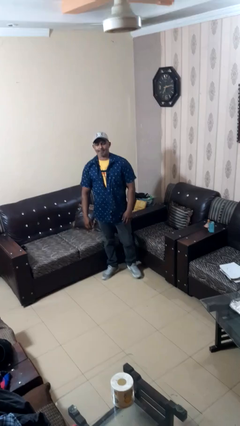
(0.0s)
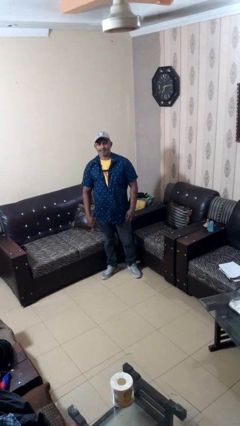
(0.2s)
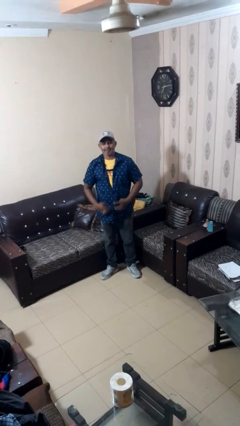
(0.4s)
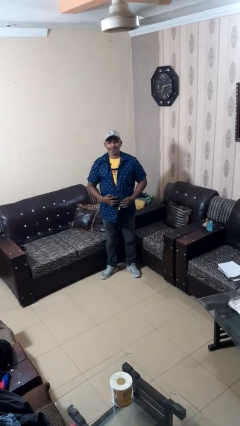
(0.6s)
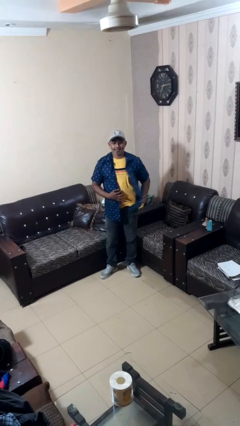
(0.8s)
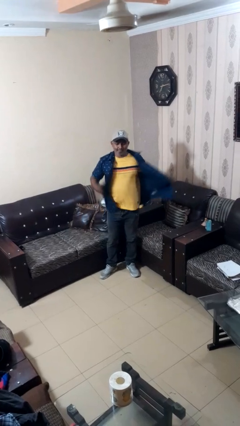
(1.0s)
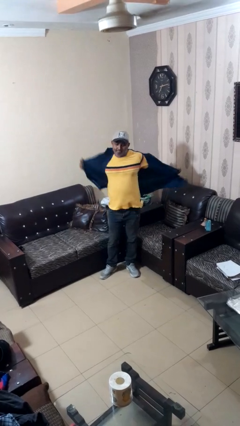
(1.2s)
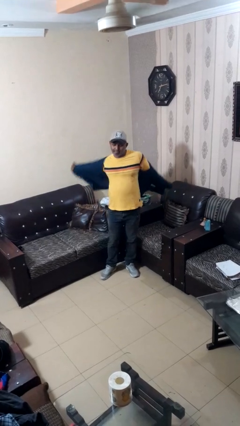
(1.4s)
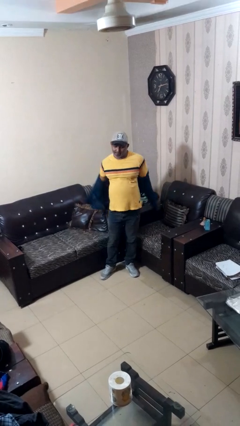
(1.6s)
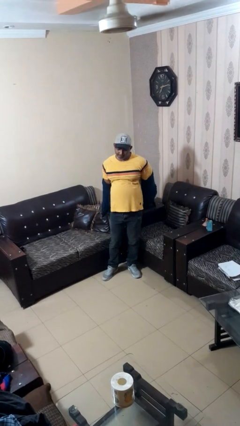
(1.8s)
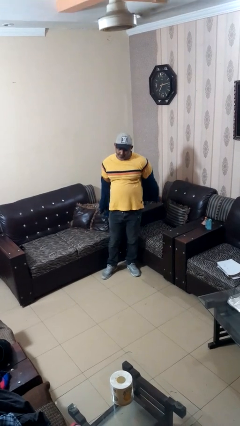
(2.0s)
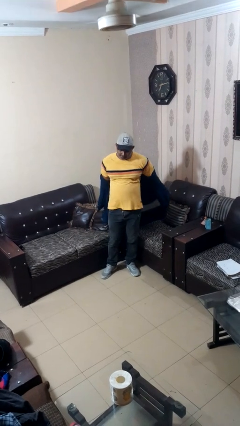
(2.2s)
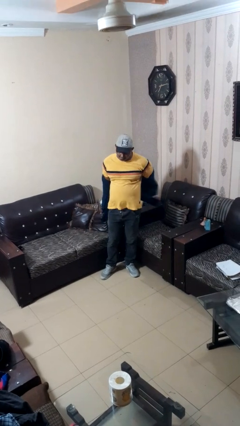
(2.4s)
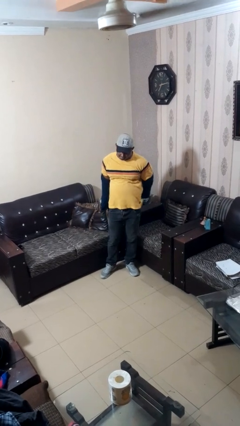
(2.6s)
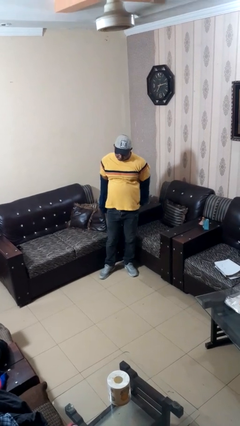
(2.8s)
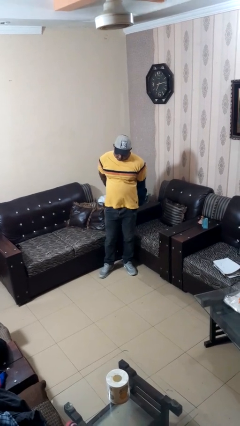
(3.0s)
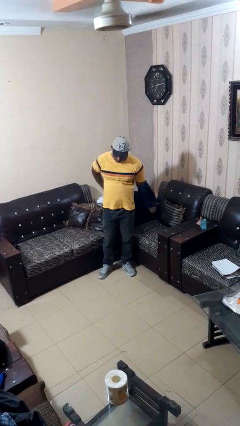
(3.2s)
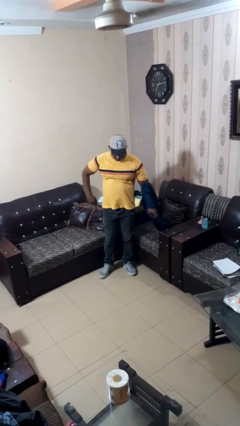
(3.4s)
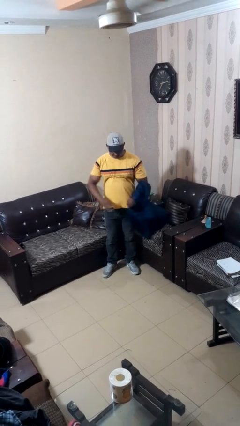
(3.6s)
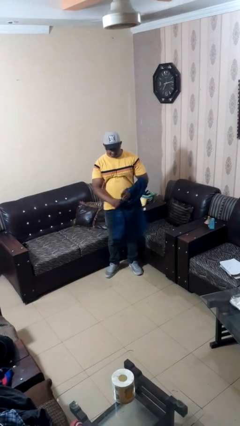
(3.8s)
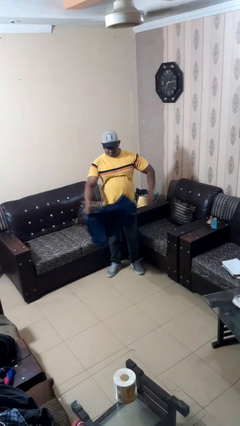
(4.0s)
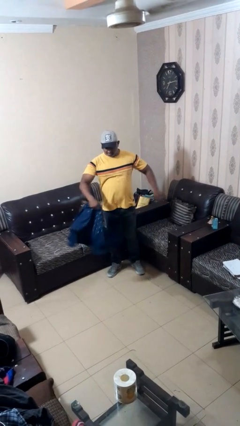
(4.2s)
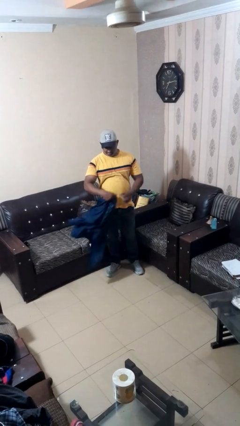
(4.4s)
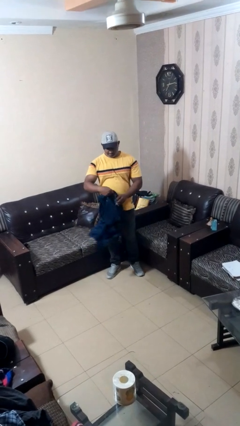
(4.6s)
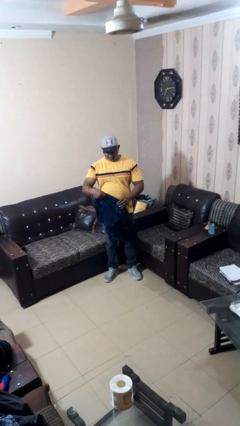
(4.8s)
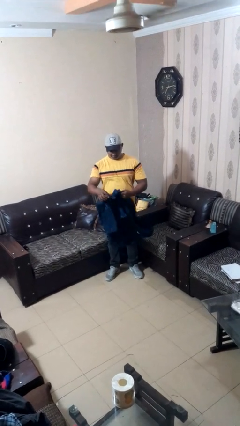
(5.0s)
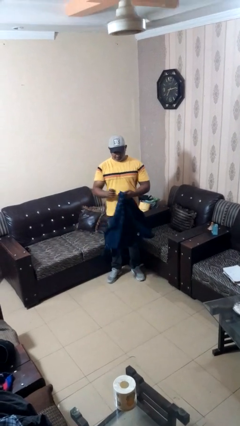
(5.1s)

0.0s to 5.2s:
person takes off shirt

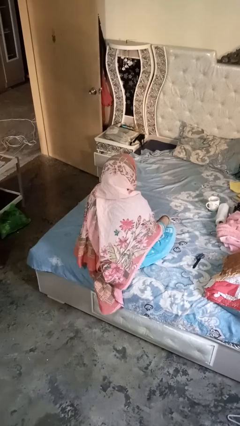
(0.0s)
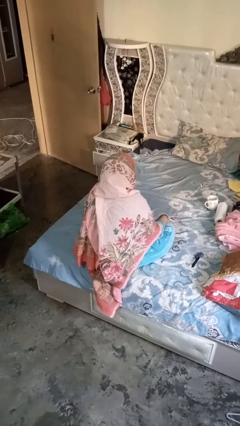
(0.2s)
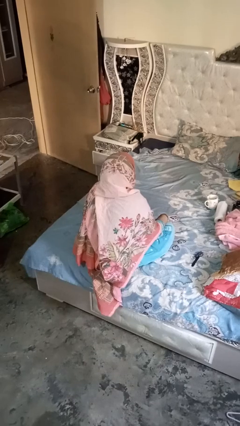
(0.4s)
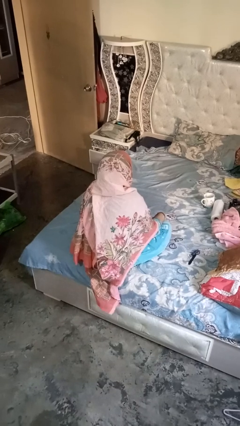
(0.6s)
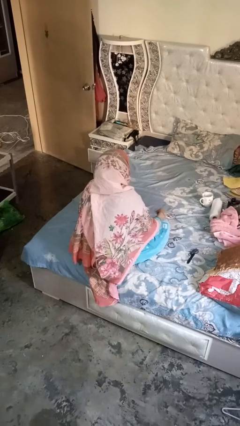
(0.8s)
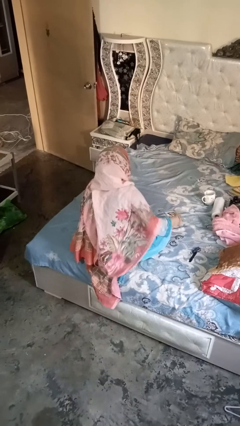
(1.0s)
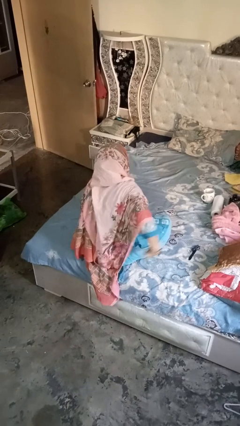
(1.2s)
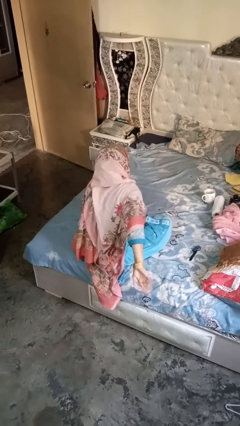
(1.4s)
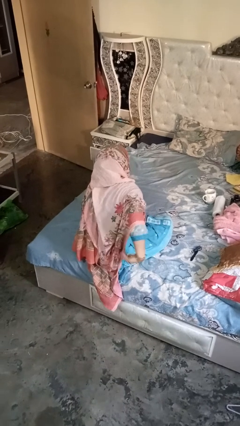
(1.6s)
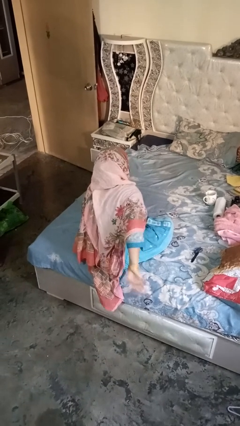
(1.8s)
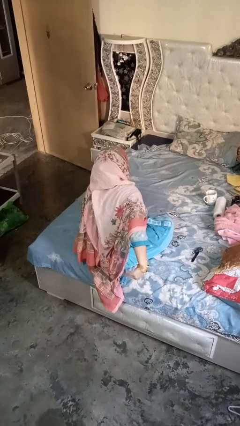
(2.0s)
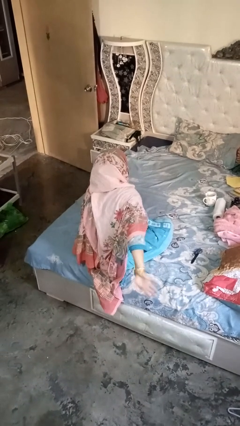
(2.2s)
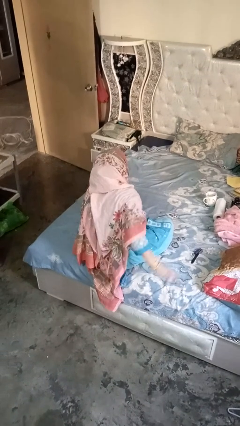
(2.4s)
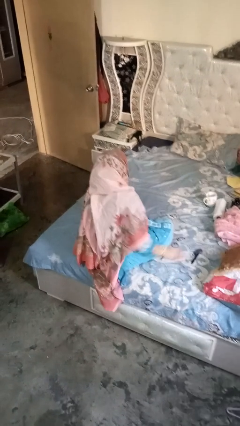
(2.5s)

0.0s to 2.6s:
person gestures behind me

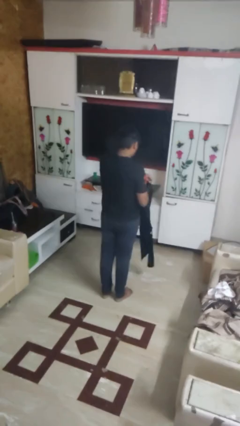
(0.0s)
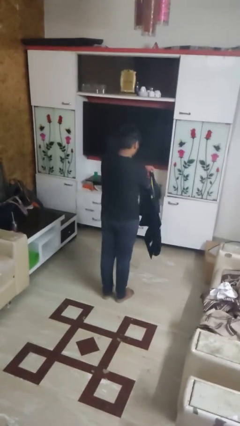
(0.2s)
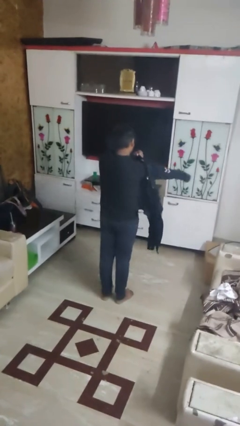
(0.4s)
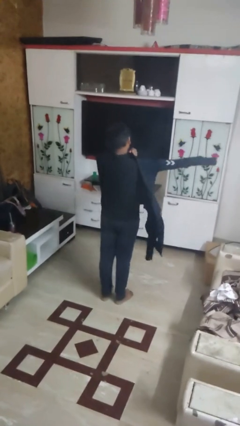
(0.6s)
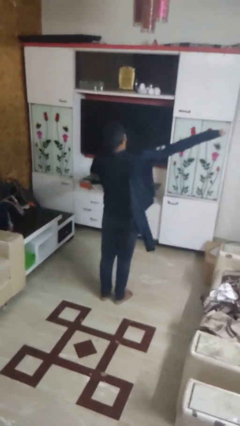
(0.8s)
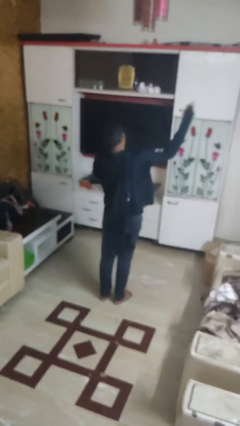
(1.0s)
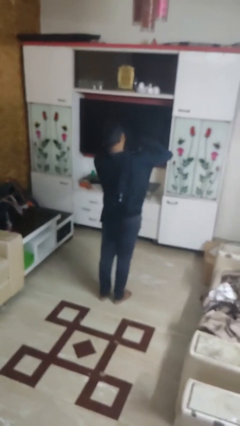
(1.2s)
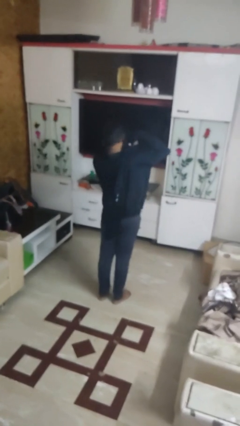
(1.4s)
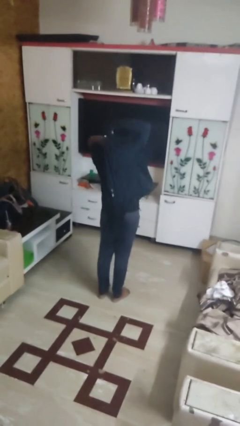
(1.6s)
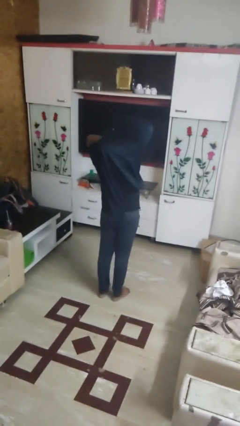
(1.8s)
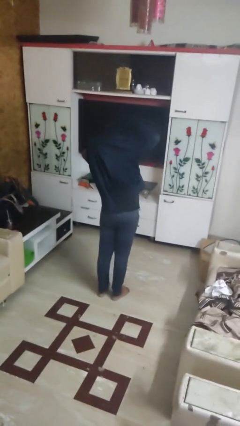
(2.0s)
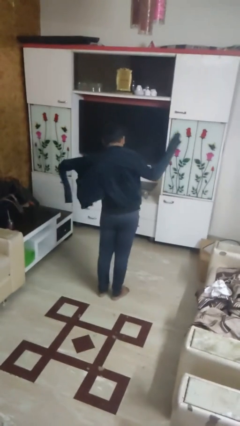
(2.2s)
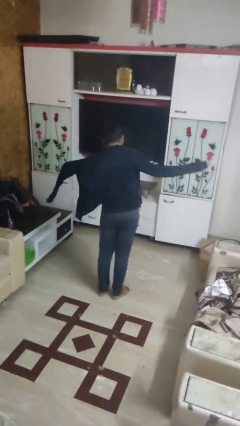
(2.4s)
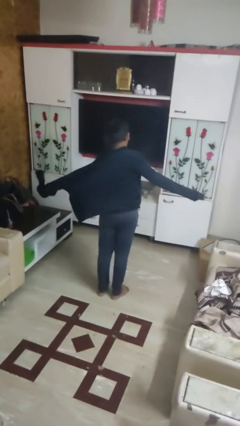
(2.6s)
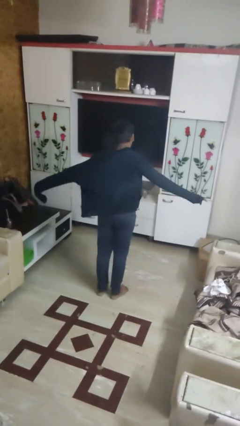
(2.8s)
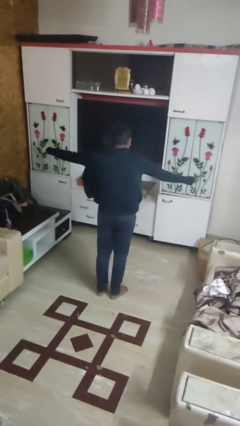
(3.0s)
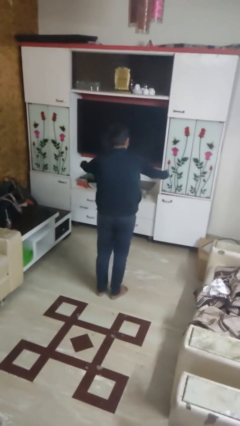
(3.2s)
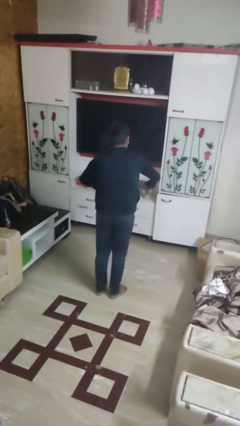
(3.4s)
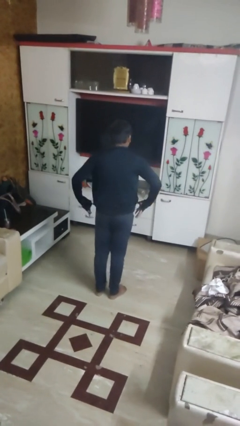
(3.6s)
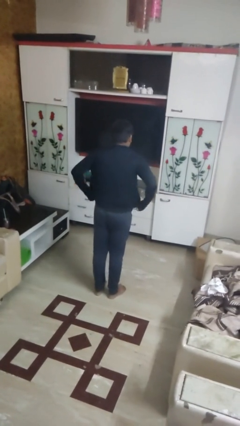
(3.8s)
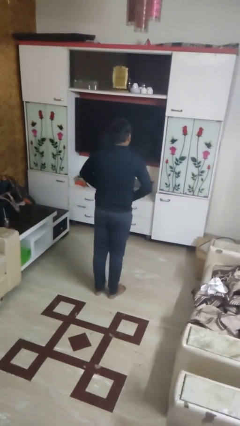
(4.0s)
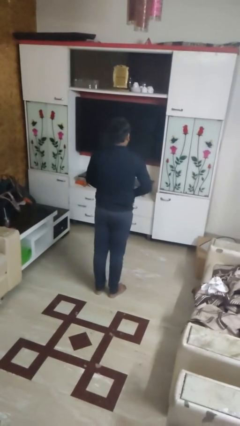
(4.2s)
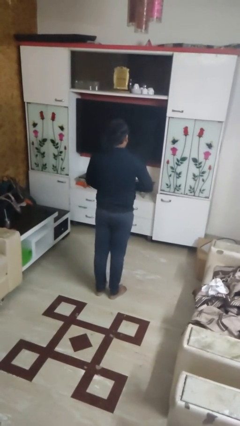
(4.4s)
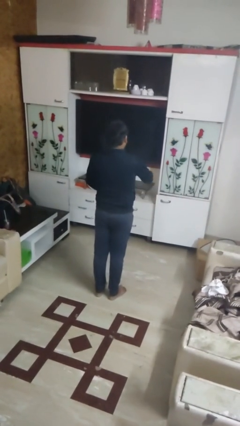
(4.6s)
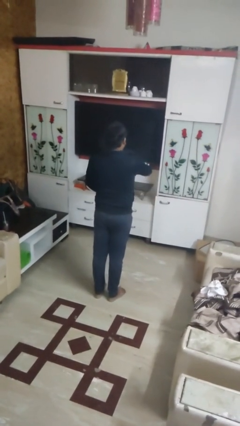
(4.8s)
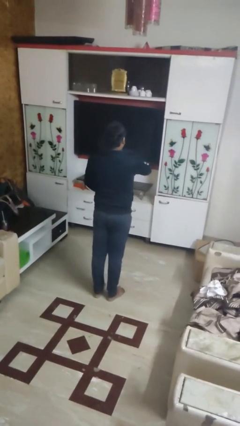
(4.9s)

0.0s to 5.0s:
person puts on jacket

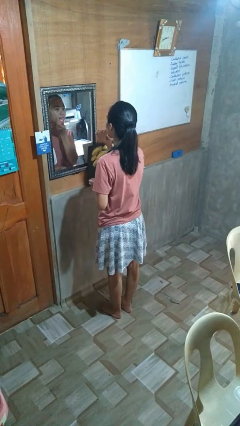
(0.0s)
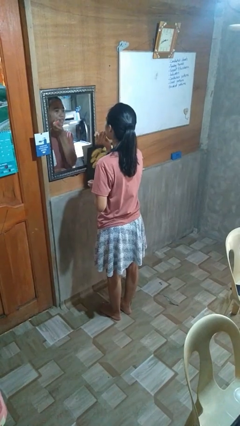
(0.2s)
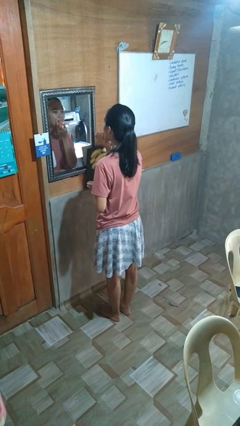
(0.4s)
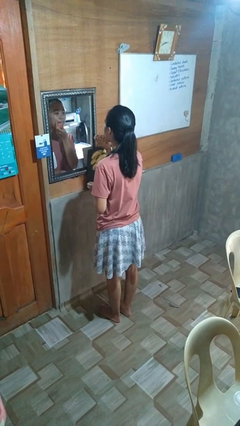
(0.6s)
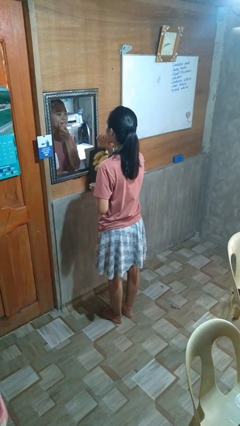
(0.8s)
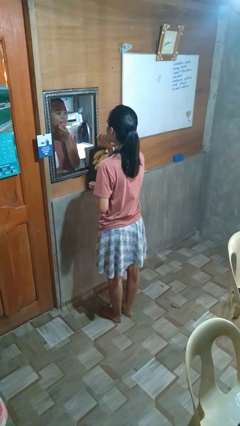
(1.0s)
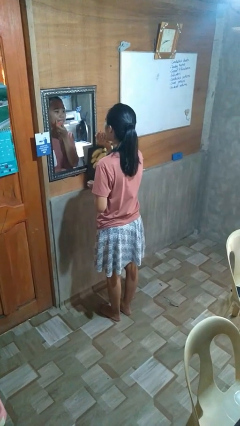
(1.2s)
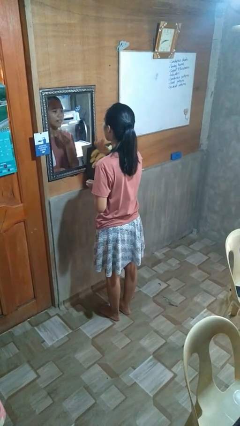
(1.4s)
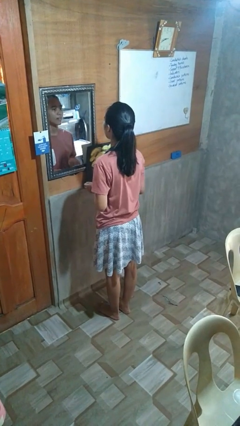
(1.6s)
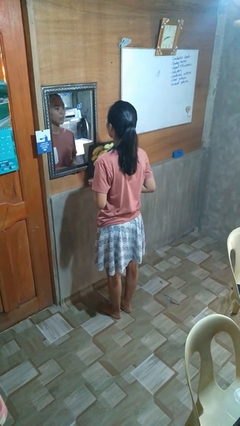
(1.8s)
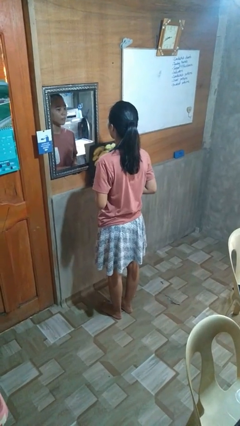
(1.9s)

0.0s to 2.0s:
person applies lip makeup

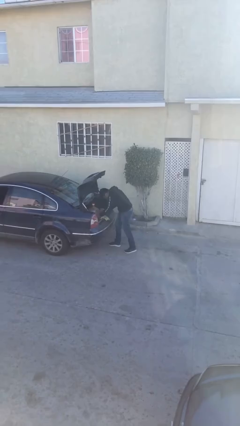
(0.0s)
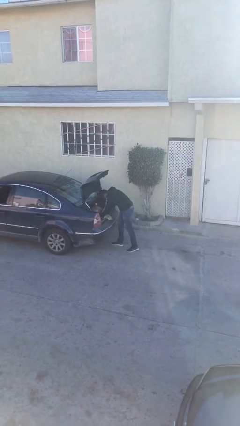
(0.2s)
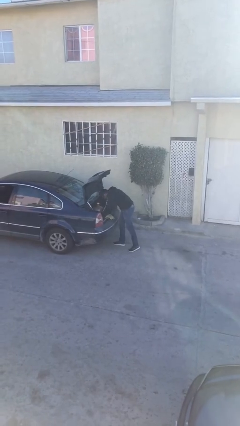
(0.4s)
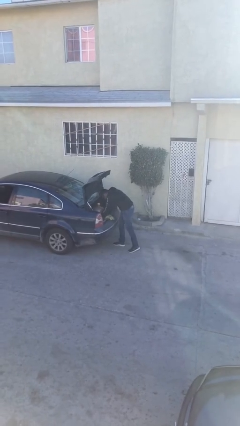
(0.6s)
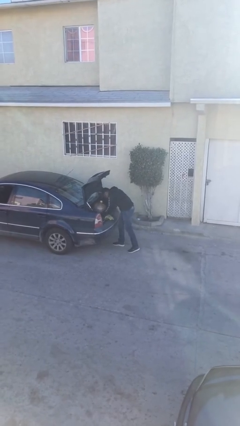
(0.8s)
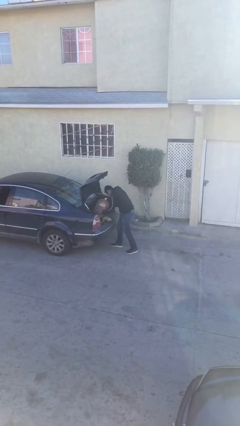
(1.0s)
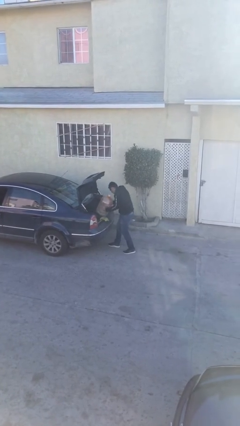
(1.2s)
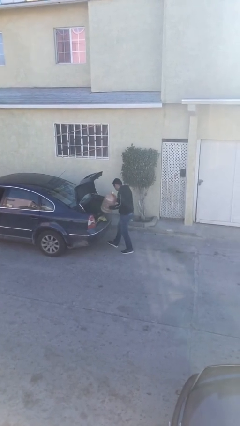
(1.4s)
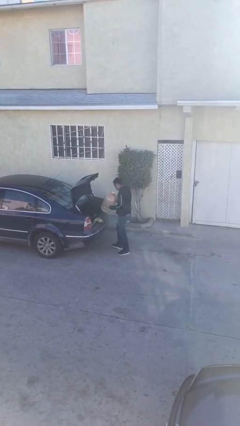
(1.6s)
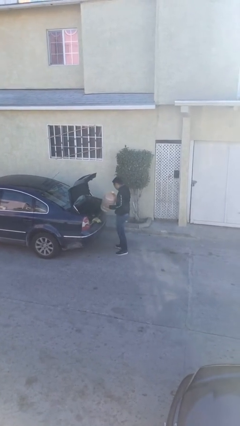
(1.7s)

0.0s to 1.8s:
person unloads car

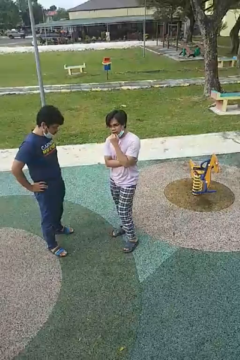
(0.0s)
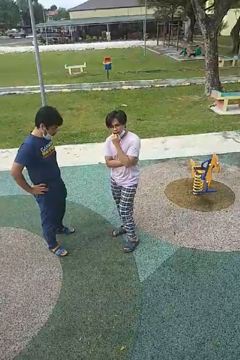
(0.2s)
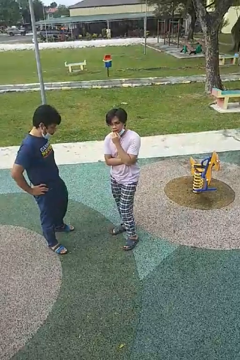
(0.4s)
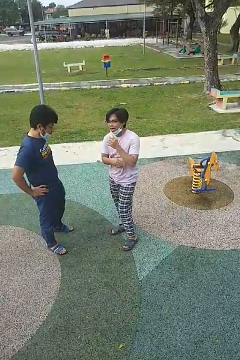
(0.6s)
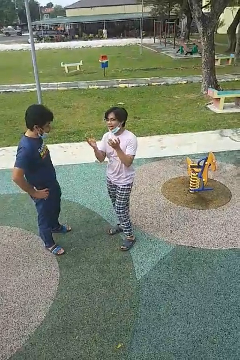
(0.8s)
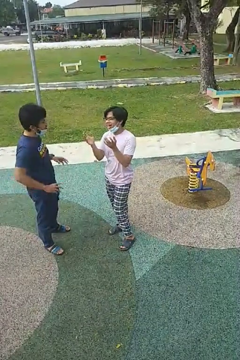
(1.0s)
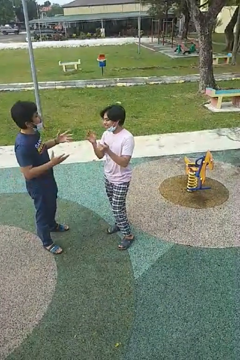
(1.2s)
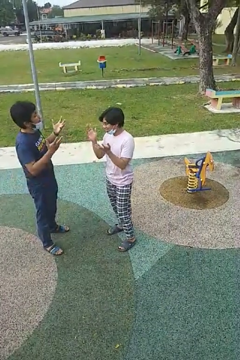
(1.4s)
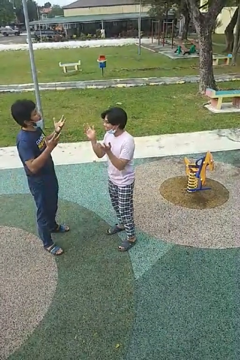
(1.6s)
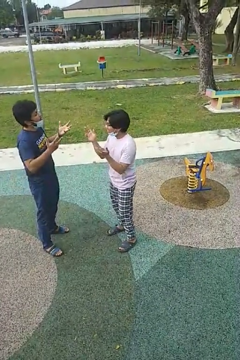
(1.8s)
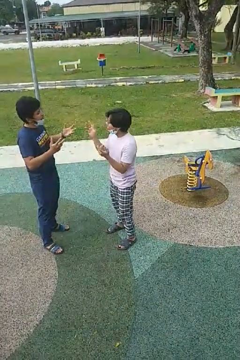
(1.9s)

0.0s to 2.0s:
person talks to person
